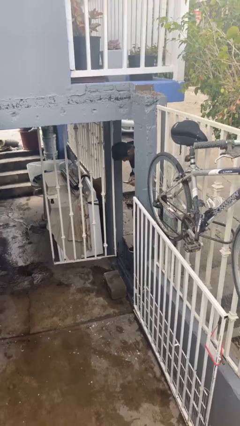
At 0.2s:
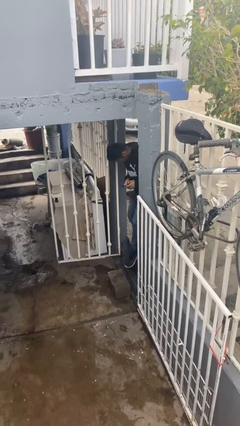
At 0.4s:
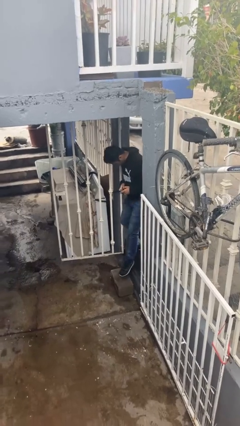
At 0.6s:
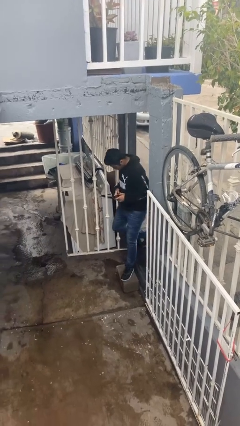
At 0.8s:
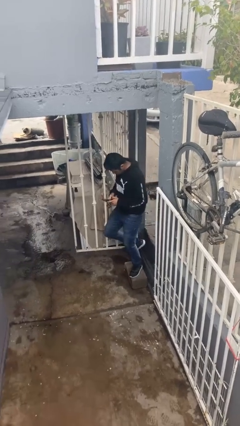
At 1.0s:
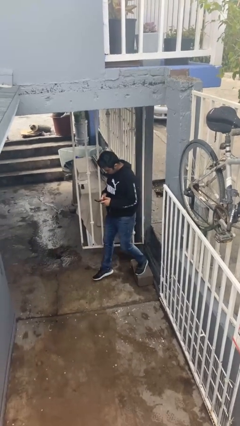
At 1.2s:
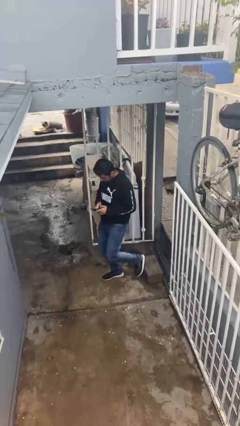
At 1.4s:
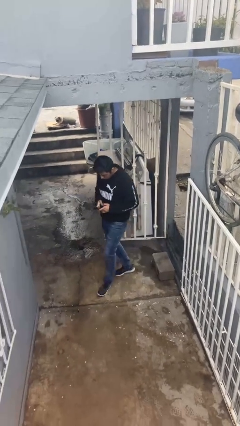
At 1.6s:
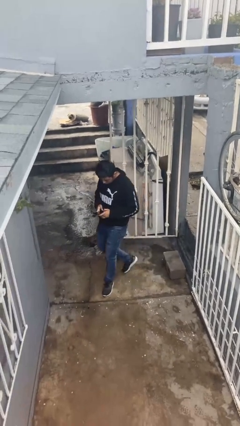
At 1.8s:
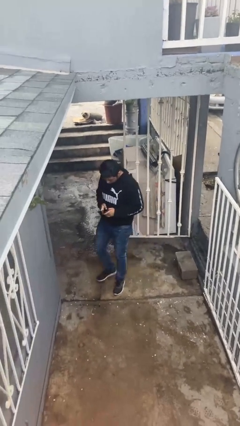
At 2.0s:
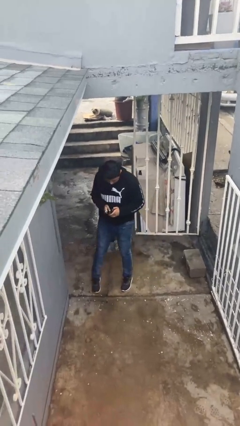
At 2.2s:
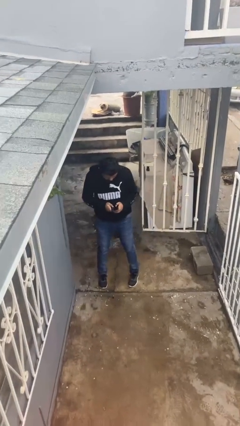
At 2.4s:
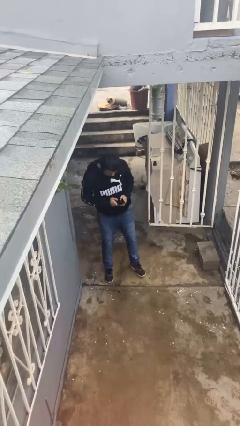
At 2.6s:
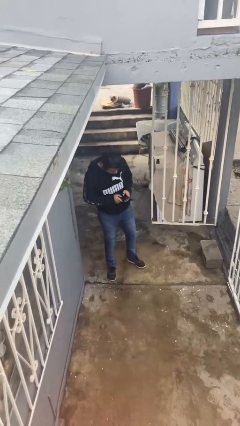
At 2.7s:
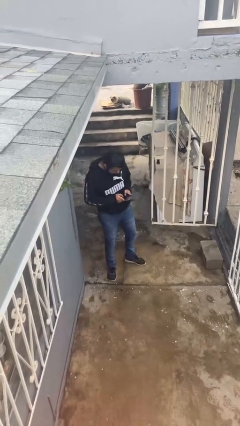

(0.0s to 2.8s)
person enters scene through structure

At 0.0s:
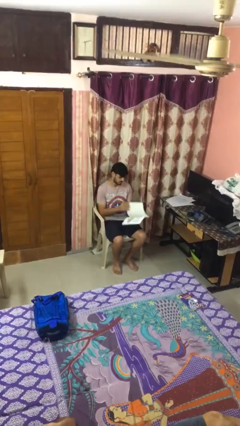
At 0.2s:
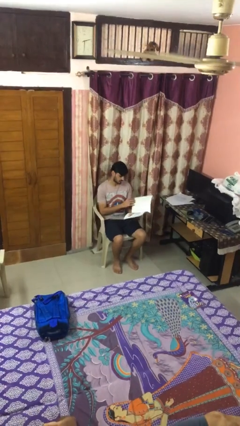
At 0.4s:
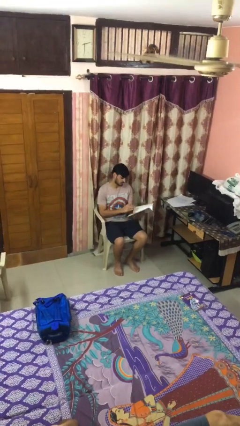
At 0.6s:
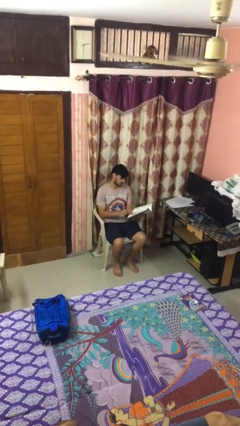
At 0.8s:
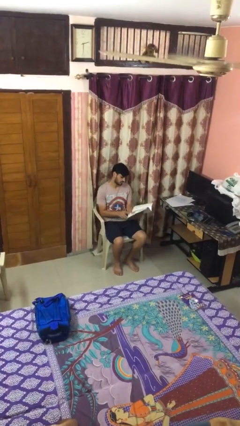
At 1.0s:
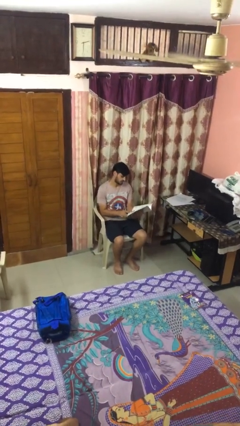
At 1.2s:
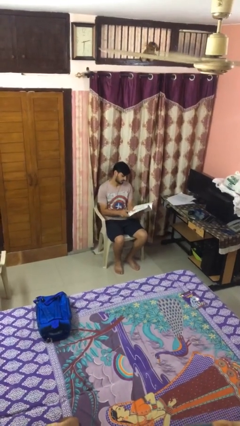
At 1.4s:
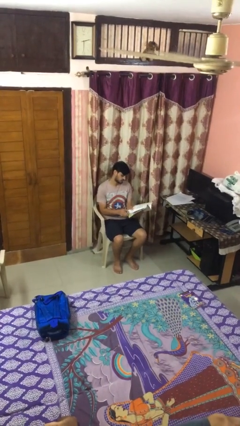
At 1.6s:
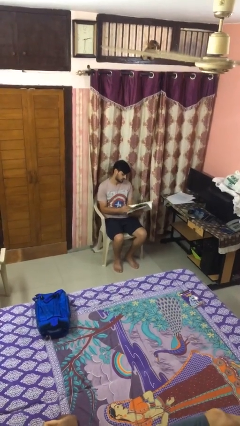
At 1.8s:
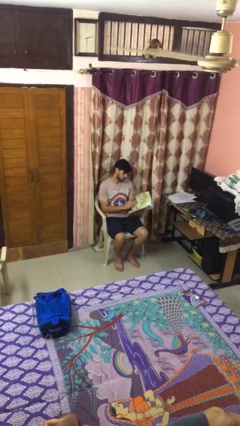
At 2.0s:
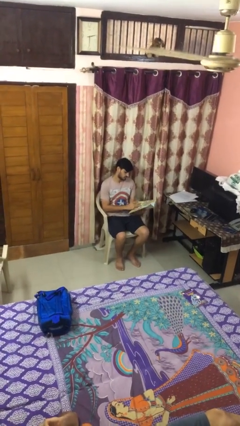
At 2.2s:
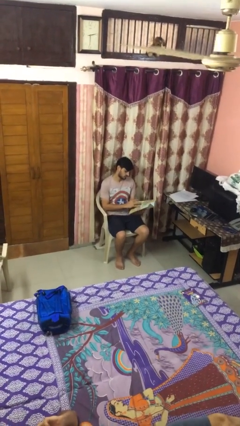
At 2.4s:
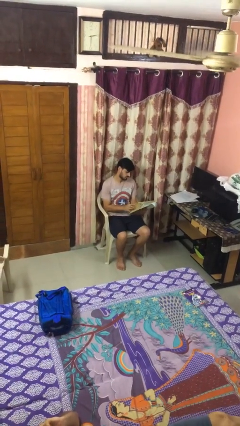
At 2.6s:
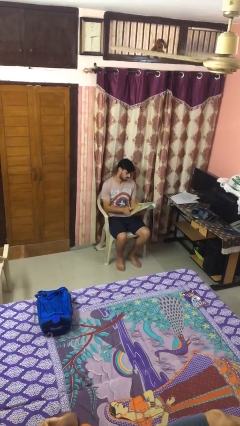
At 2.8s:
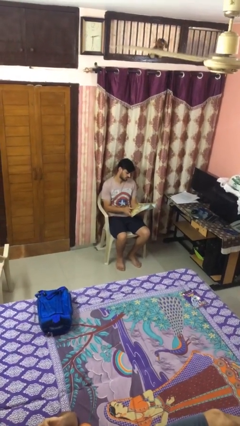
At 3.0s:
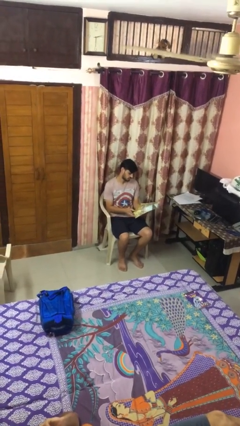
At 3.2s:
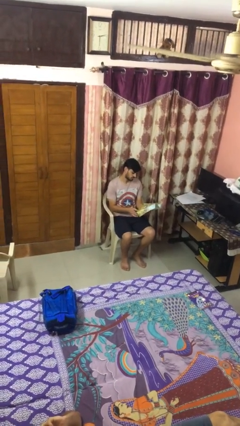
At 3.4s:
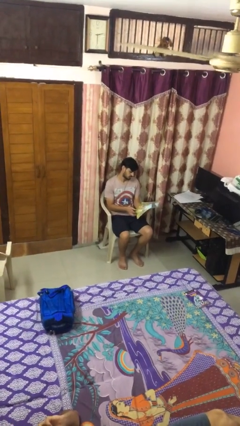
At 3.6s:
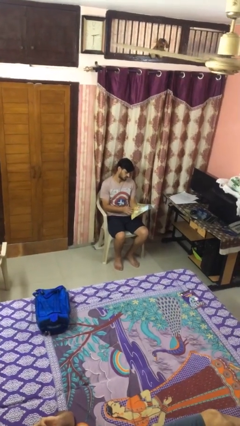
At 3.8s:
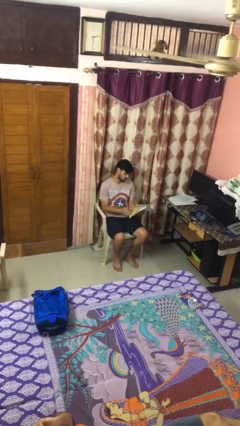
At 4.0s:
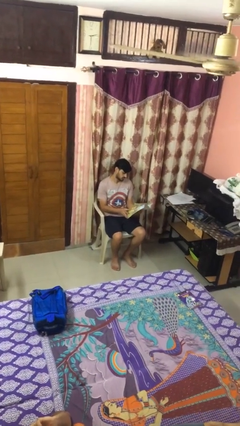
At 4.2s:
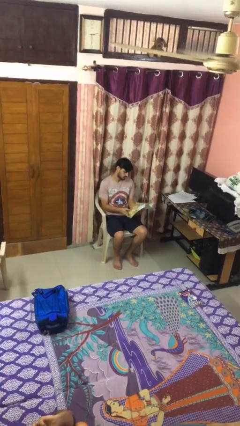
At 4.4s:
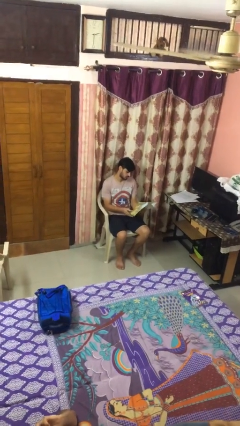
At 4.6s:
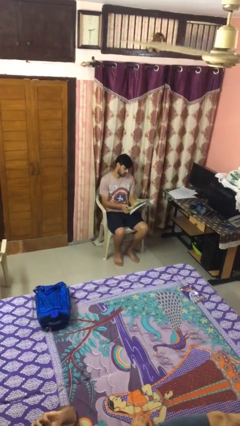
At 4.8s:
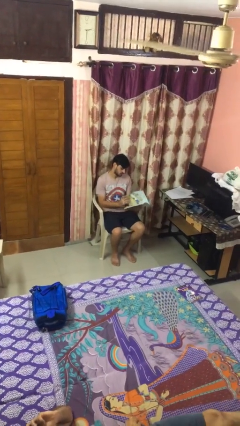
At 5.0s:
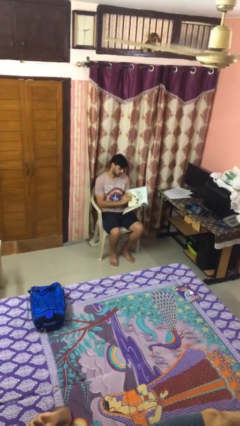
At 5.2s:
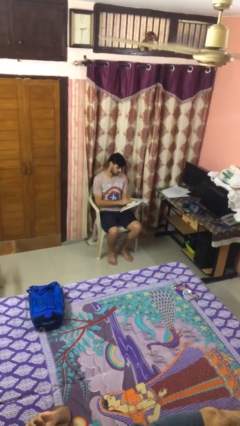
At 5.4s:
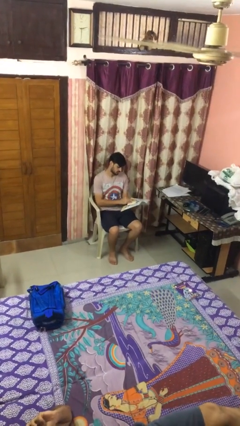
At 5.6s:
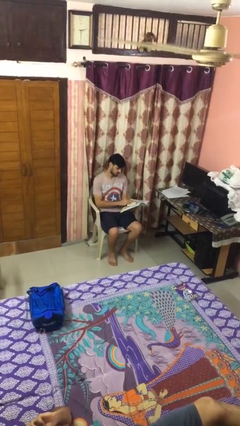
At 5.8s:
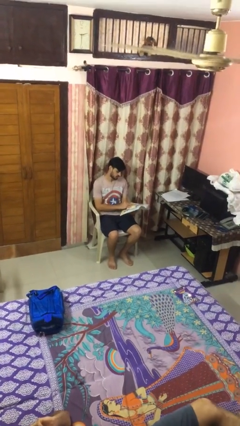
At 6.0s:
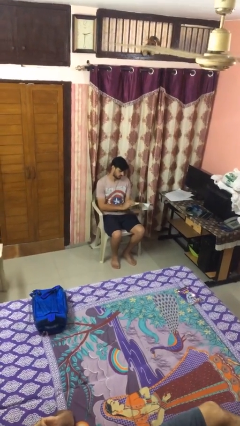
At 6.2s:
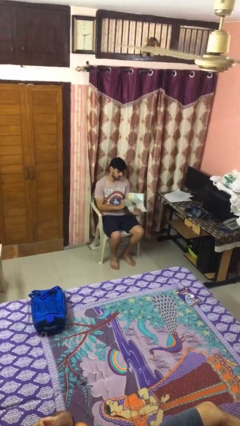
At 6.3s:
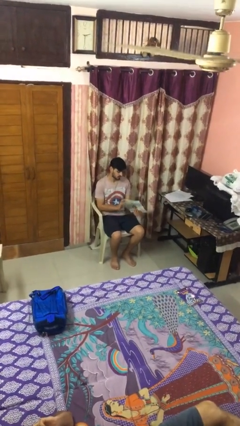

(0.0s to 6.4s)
person reads magazine

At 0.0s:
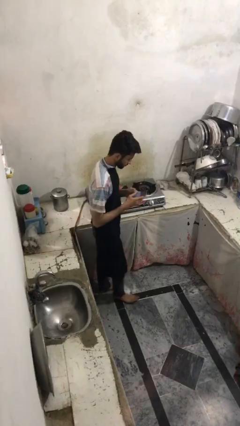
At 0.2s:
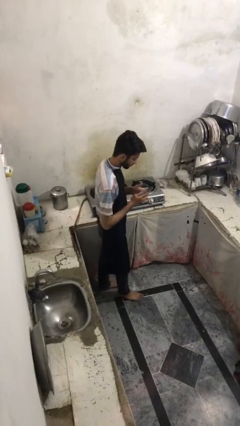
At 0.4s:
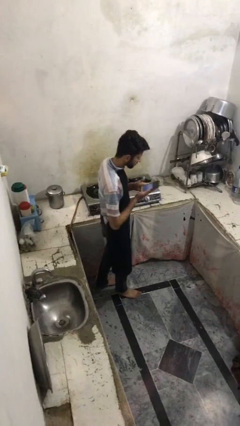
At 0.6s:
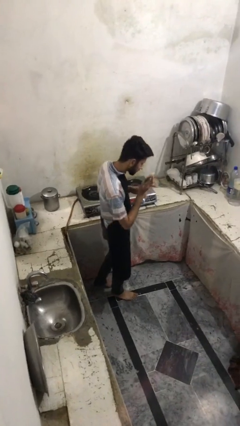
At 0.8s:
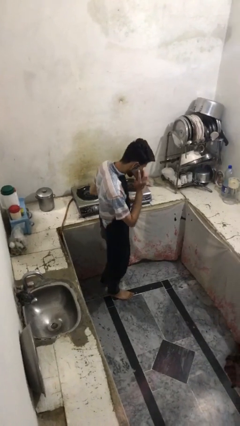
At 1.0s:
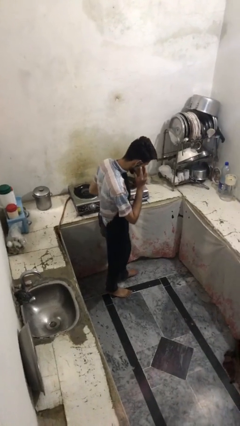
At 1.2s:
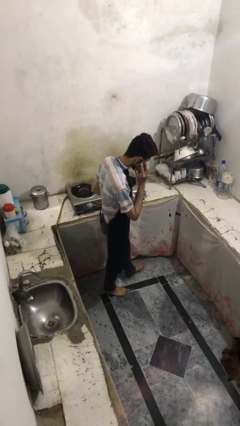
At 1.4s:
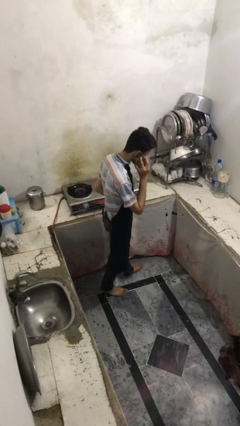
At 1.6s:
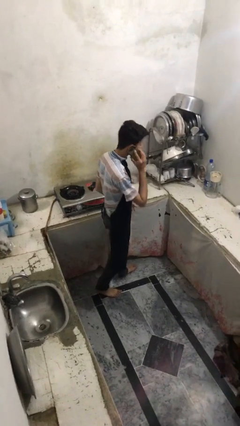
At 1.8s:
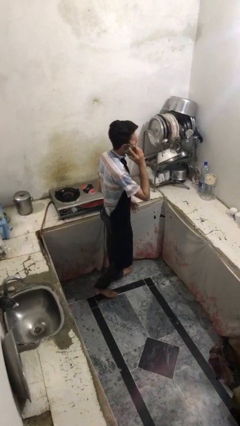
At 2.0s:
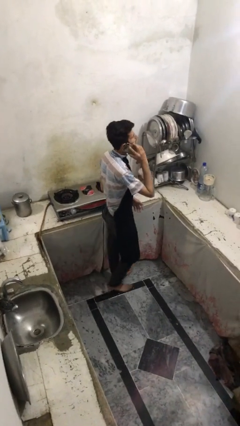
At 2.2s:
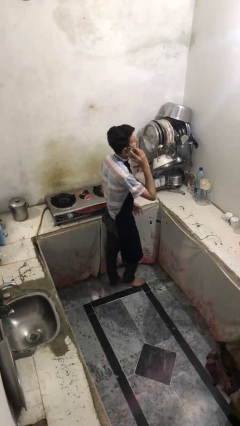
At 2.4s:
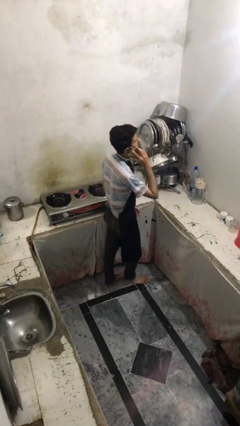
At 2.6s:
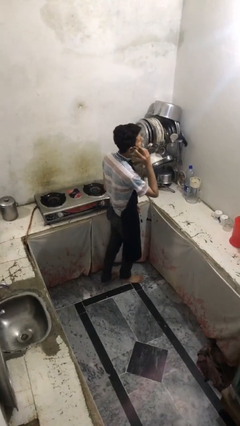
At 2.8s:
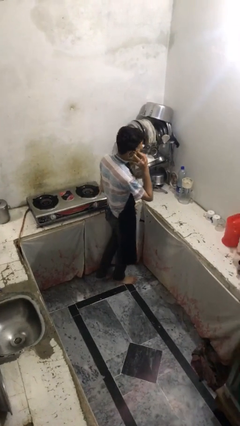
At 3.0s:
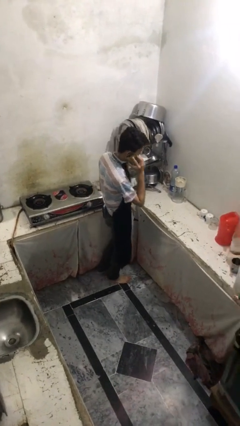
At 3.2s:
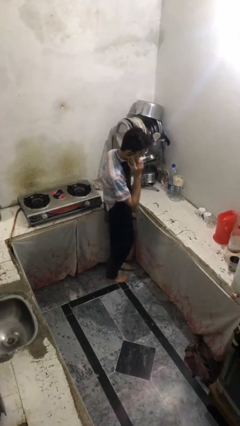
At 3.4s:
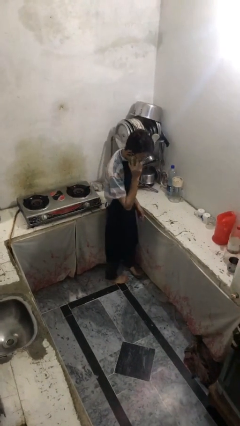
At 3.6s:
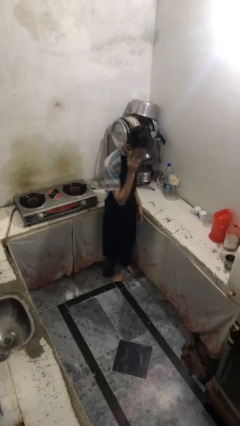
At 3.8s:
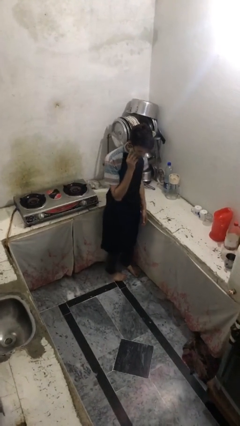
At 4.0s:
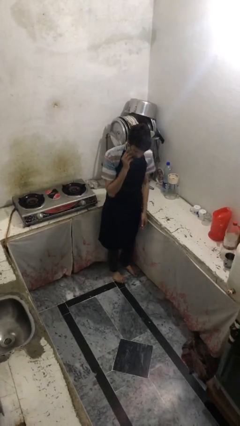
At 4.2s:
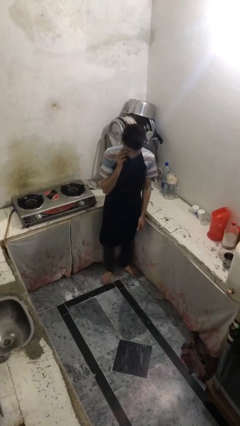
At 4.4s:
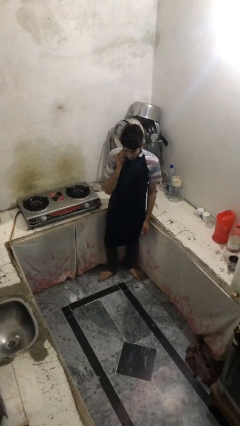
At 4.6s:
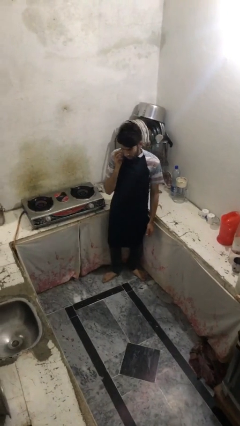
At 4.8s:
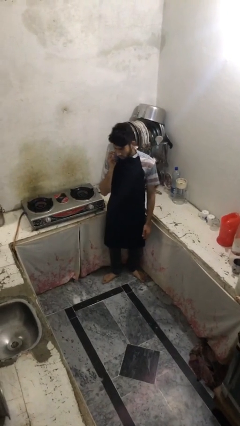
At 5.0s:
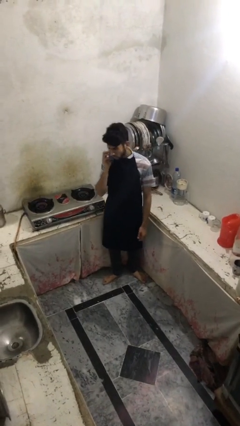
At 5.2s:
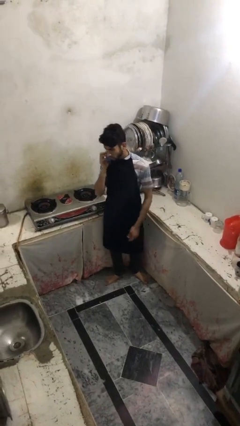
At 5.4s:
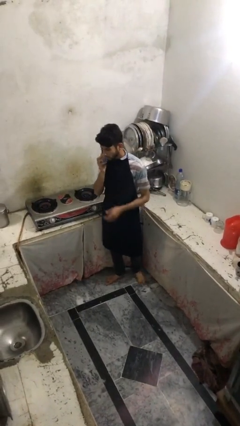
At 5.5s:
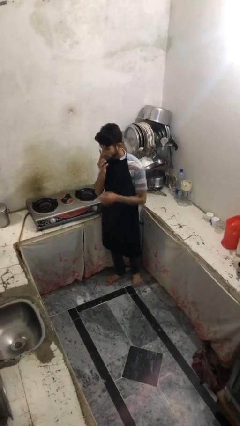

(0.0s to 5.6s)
person talks on phone

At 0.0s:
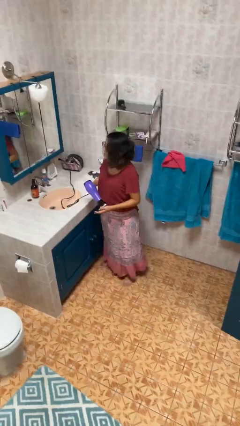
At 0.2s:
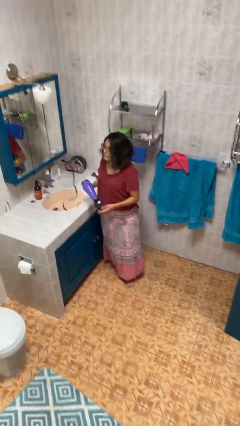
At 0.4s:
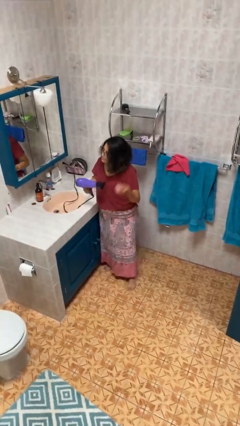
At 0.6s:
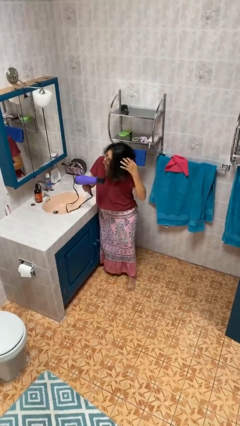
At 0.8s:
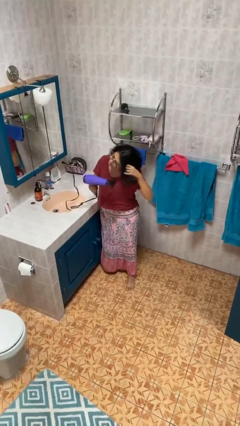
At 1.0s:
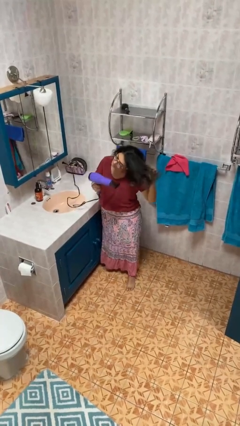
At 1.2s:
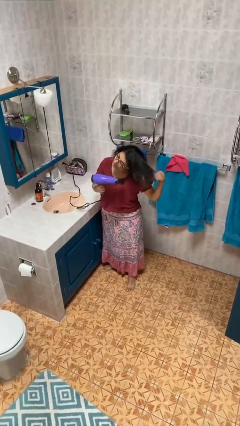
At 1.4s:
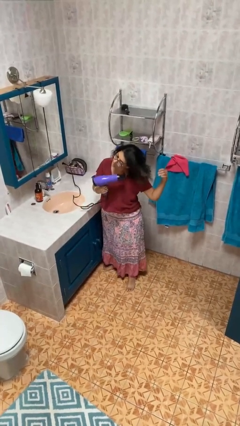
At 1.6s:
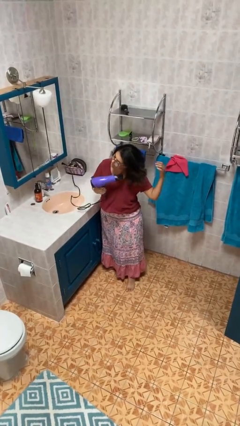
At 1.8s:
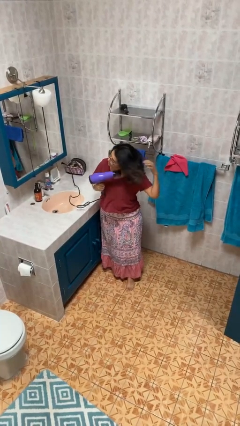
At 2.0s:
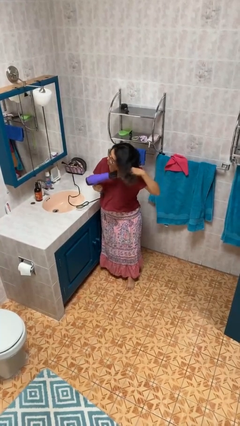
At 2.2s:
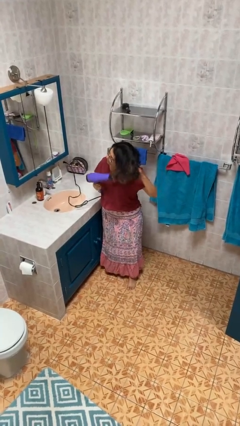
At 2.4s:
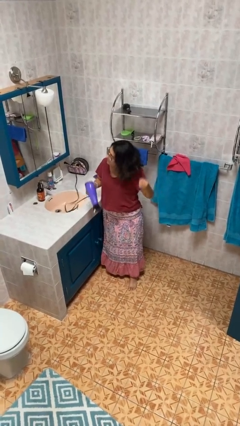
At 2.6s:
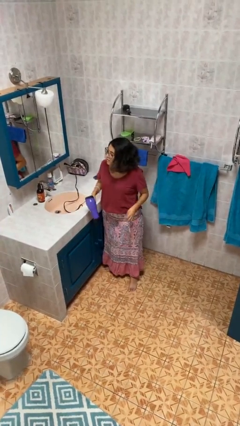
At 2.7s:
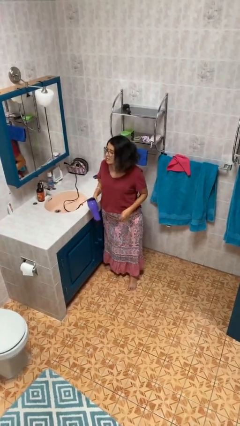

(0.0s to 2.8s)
person dries hair with hairdryer

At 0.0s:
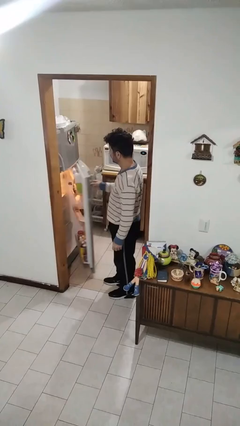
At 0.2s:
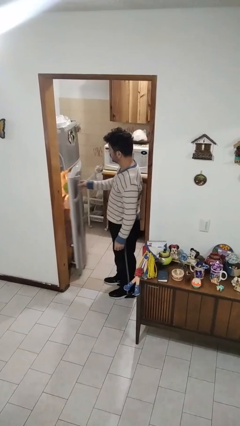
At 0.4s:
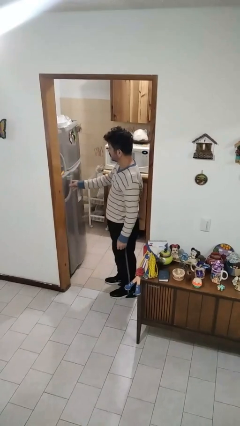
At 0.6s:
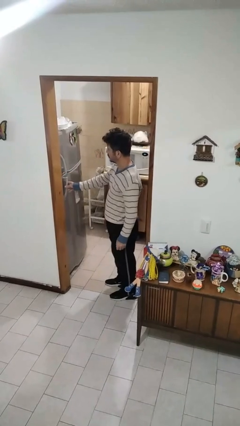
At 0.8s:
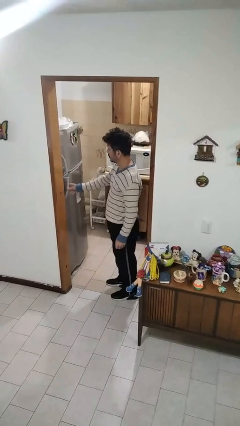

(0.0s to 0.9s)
person closes refrigerator
